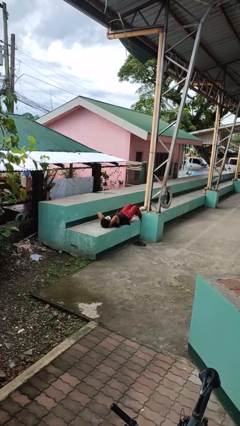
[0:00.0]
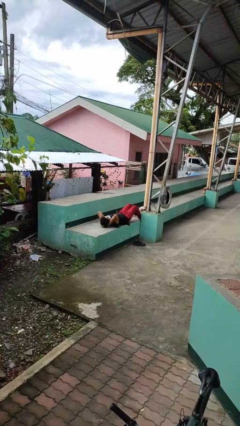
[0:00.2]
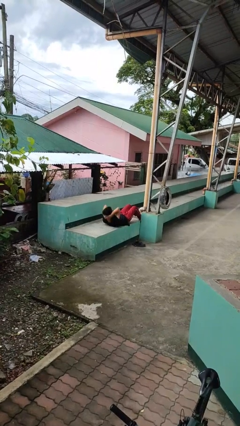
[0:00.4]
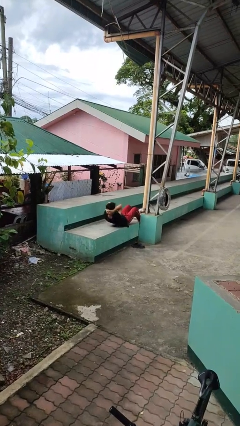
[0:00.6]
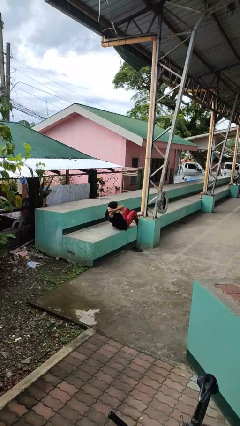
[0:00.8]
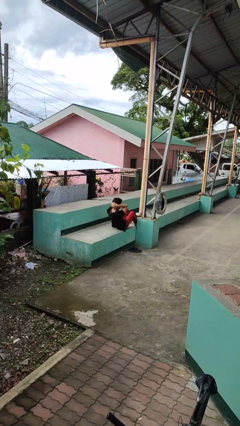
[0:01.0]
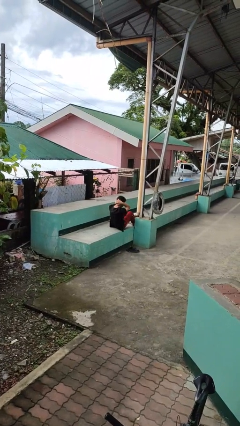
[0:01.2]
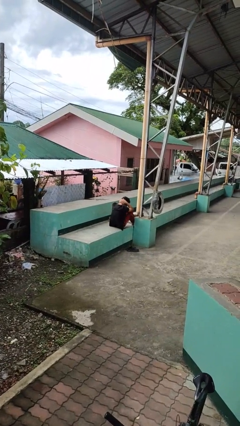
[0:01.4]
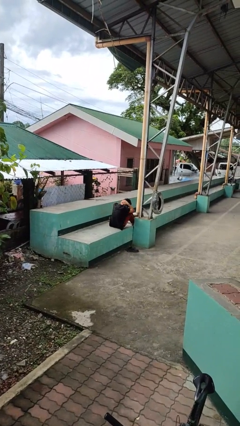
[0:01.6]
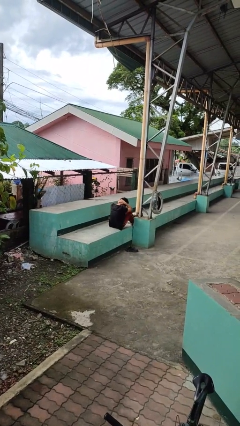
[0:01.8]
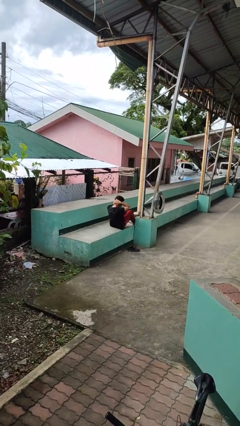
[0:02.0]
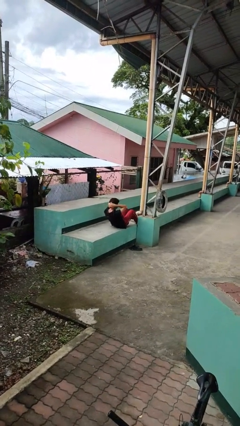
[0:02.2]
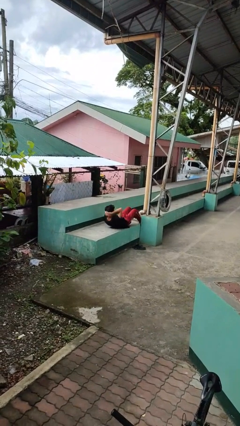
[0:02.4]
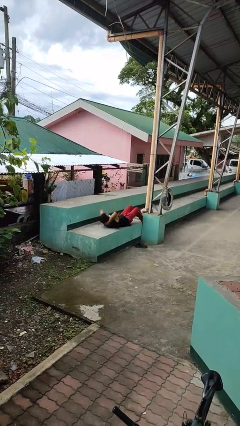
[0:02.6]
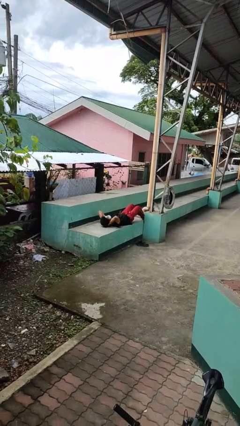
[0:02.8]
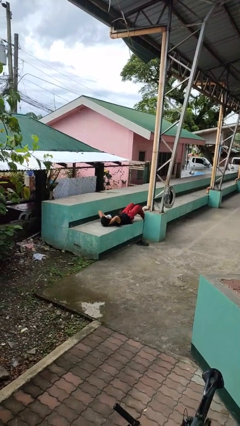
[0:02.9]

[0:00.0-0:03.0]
person exercises with situp

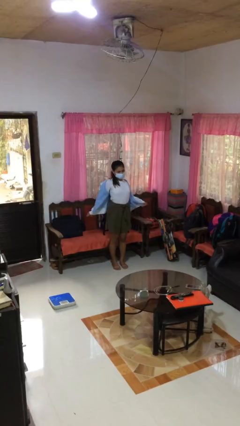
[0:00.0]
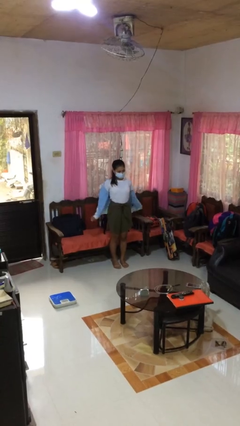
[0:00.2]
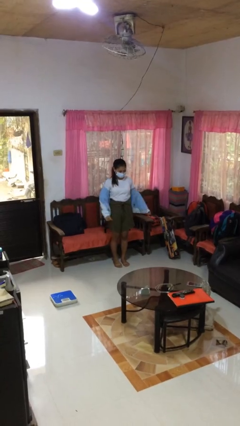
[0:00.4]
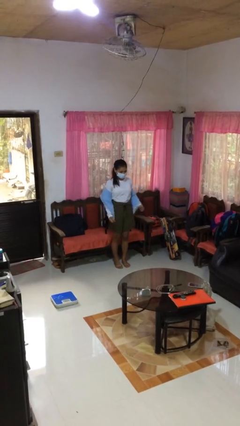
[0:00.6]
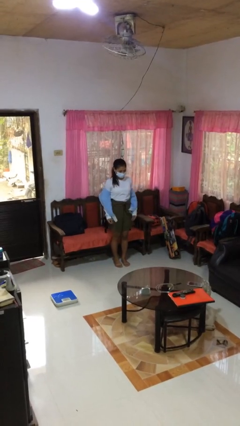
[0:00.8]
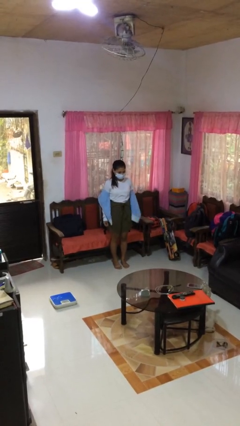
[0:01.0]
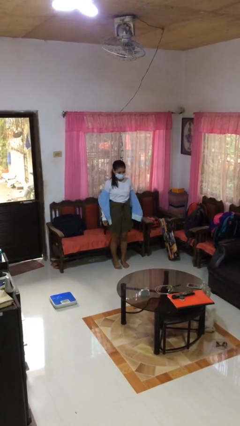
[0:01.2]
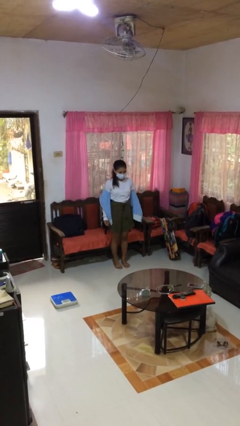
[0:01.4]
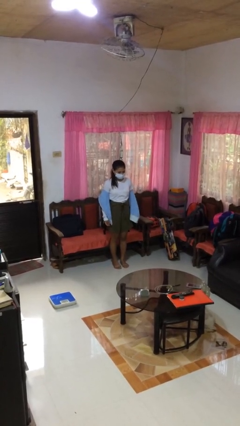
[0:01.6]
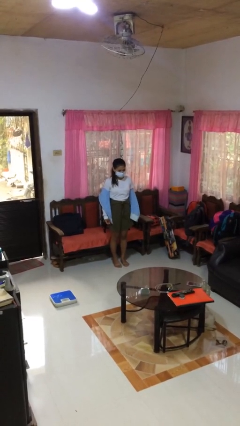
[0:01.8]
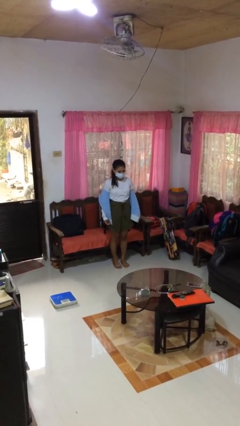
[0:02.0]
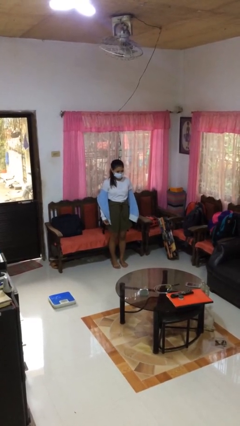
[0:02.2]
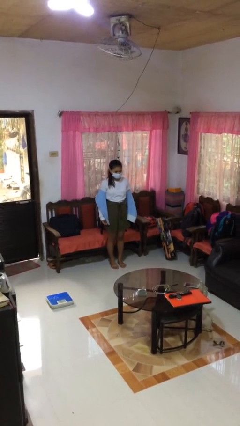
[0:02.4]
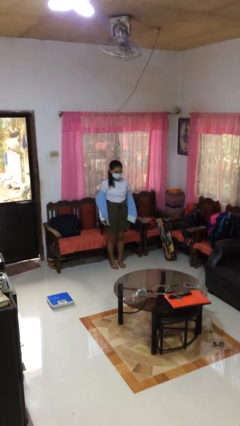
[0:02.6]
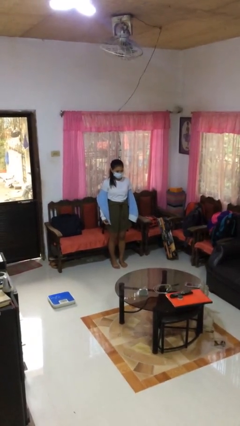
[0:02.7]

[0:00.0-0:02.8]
person takes off jacket

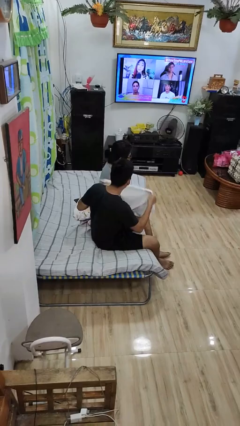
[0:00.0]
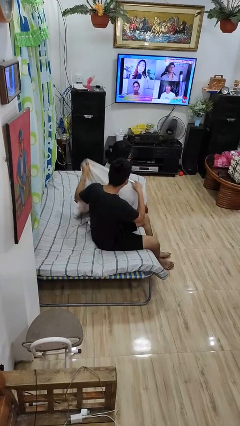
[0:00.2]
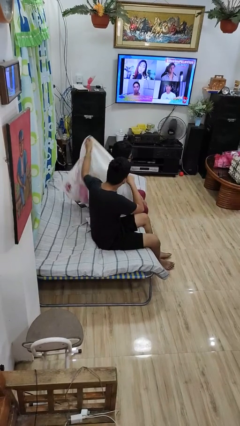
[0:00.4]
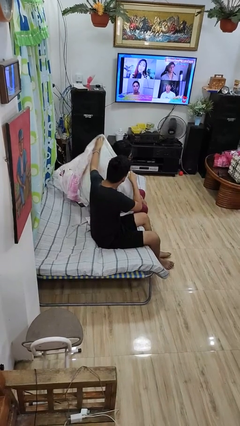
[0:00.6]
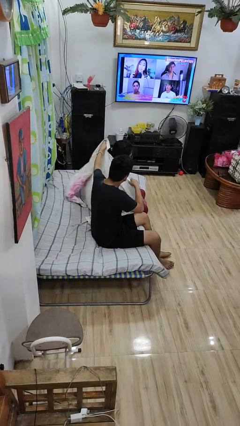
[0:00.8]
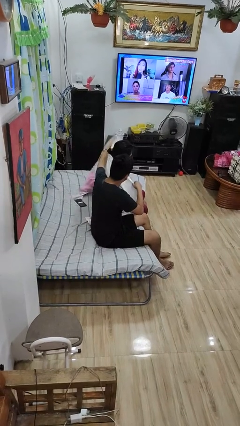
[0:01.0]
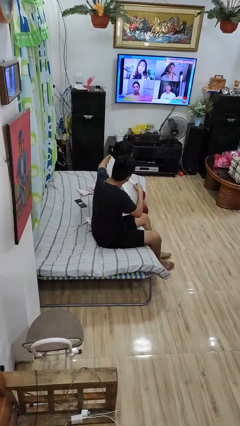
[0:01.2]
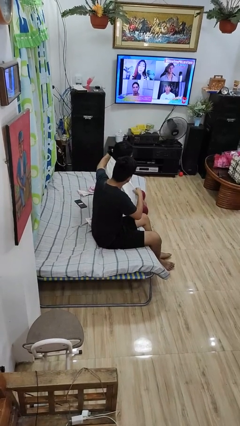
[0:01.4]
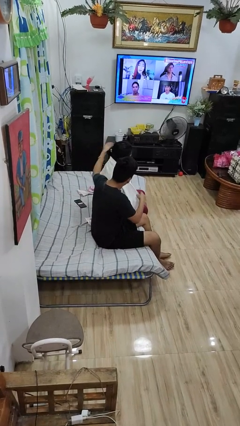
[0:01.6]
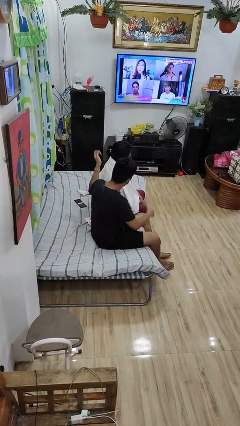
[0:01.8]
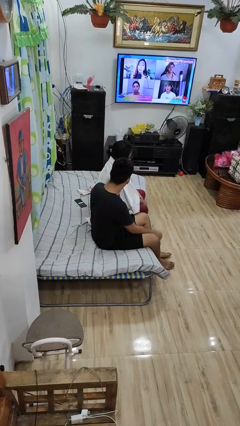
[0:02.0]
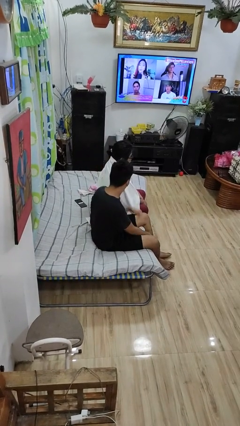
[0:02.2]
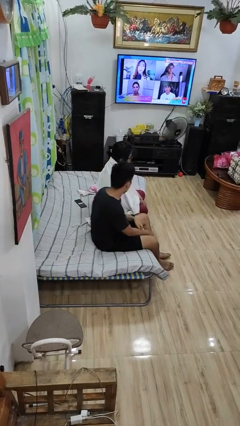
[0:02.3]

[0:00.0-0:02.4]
person covers friend with blanket

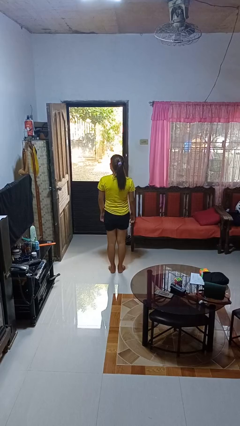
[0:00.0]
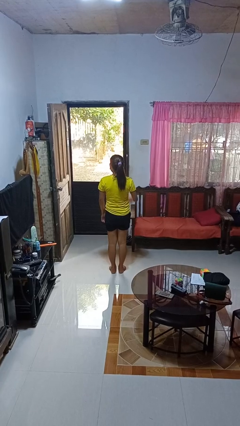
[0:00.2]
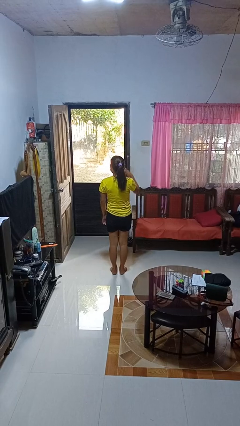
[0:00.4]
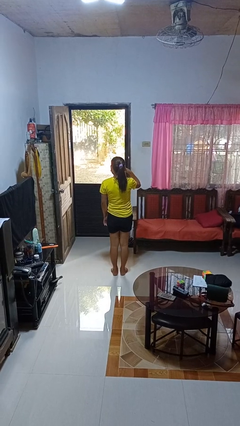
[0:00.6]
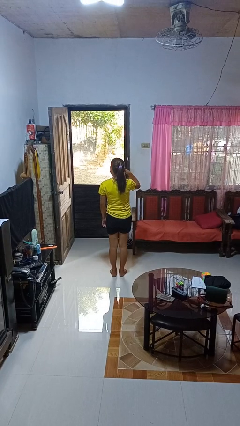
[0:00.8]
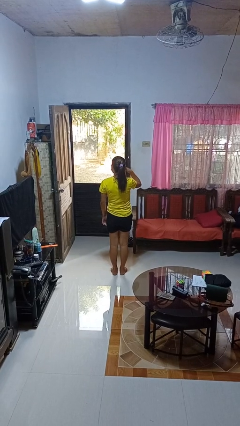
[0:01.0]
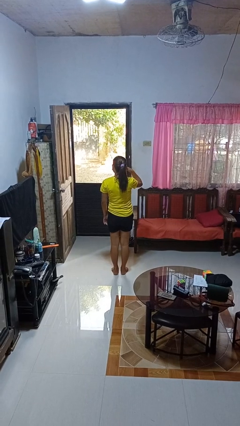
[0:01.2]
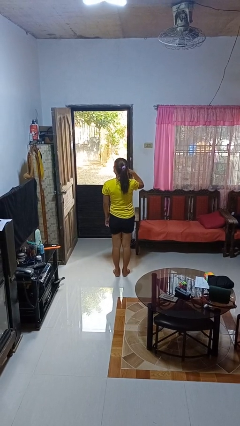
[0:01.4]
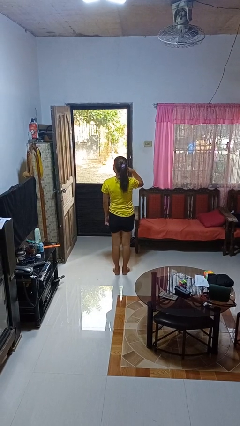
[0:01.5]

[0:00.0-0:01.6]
person gestures call me

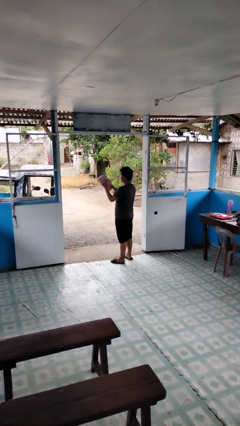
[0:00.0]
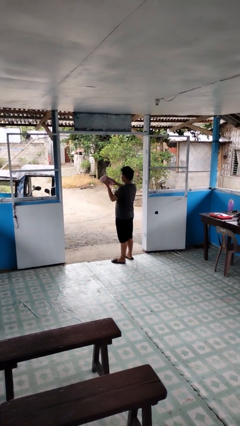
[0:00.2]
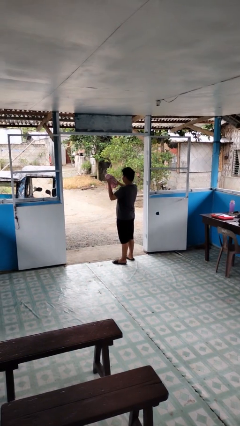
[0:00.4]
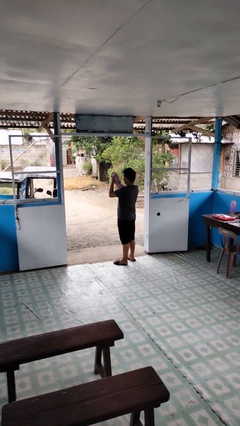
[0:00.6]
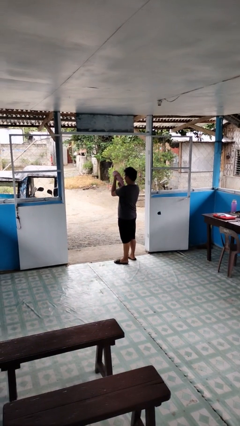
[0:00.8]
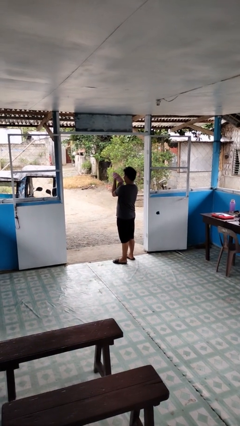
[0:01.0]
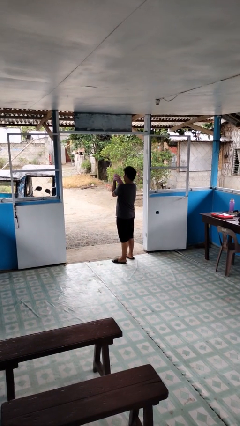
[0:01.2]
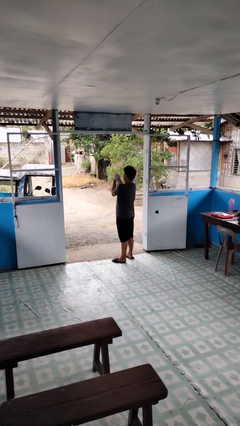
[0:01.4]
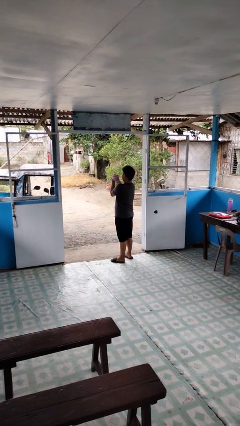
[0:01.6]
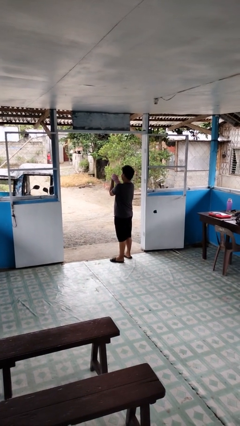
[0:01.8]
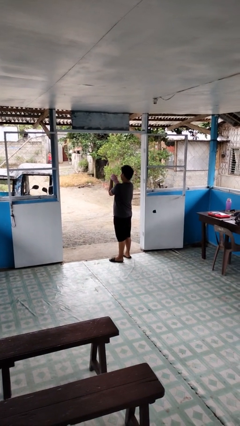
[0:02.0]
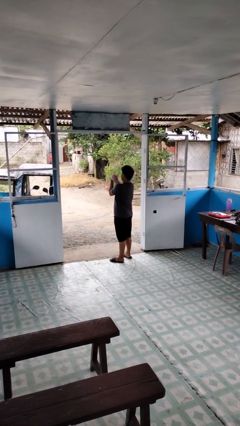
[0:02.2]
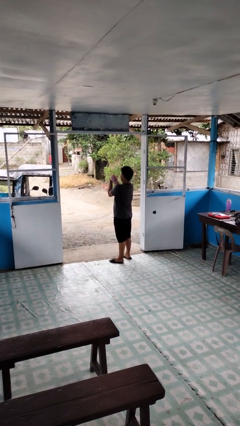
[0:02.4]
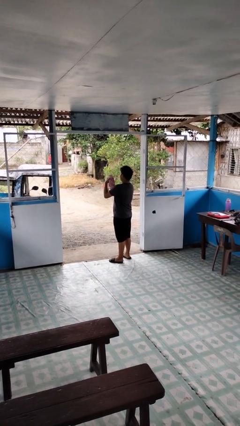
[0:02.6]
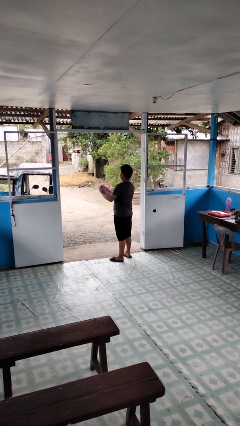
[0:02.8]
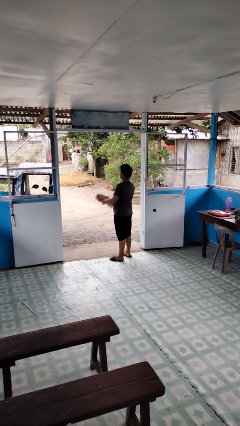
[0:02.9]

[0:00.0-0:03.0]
person squeezes object

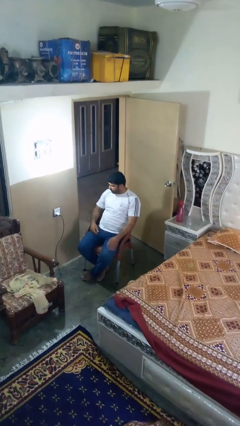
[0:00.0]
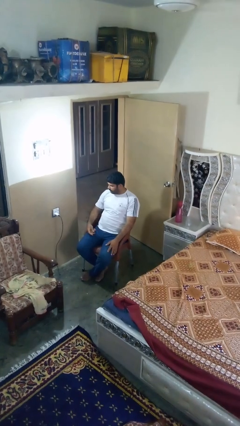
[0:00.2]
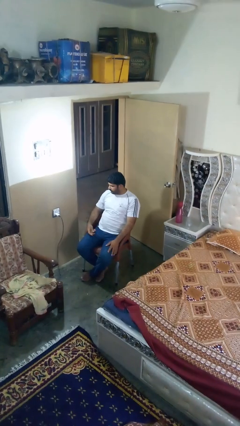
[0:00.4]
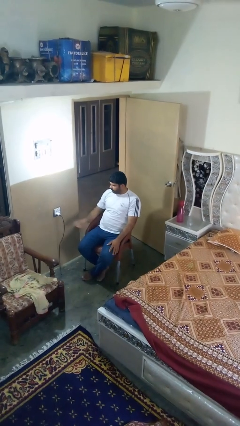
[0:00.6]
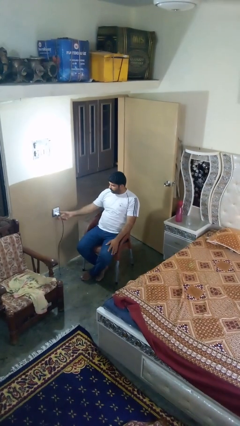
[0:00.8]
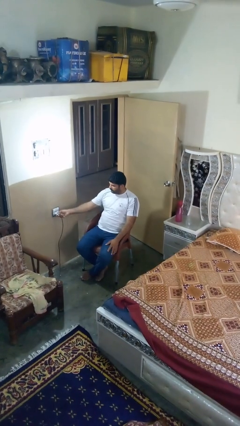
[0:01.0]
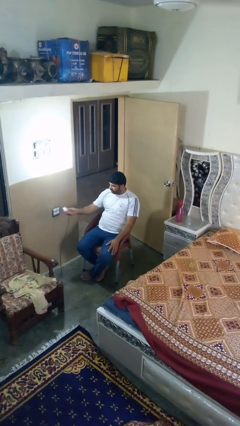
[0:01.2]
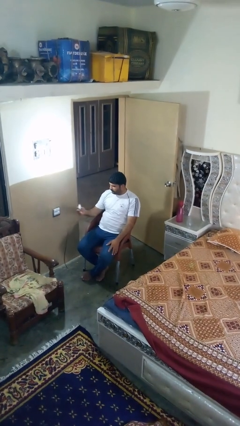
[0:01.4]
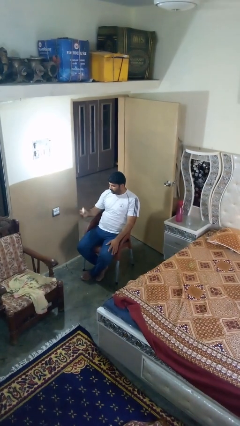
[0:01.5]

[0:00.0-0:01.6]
person unplugs from electrical socket

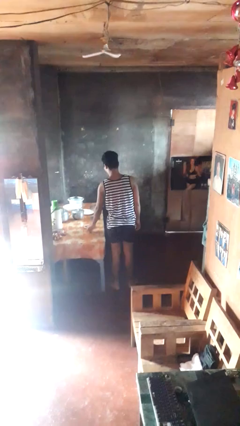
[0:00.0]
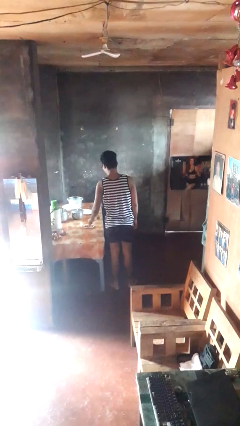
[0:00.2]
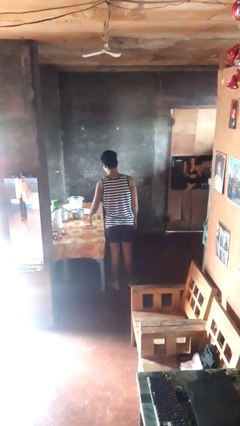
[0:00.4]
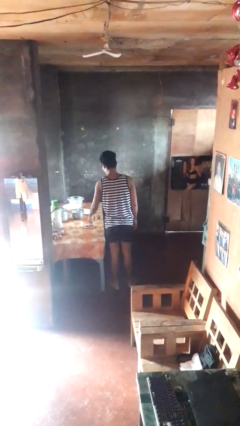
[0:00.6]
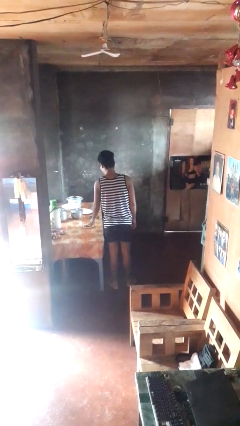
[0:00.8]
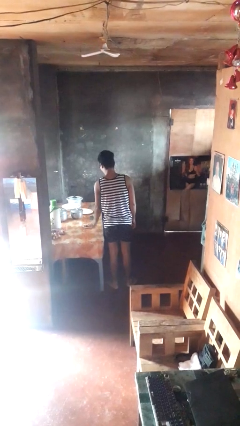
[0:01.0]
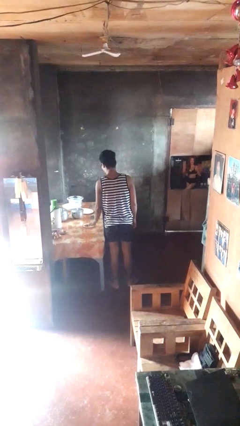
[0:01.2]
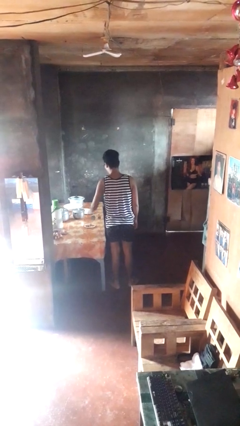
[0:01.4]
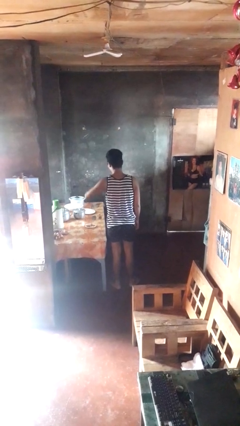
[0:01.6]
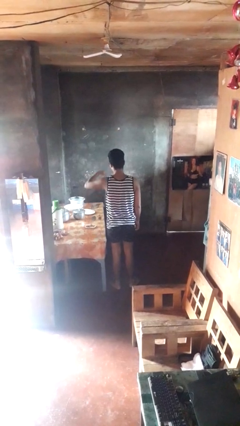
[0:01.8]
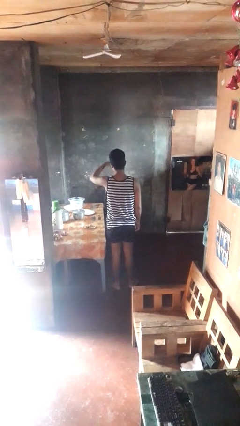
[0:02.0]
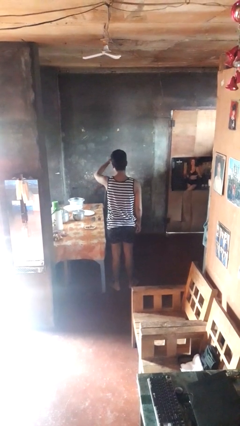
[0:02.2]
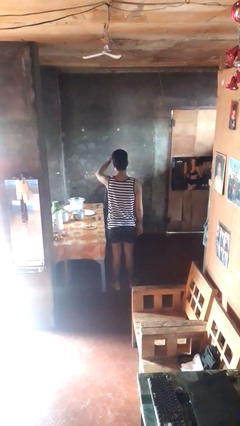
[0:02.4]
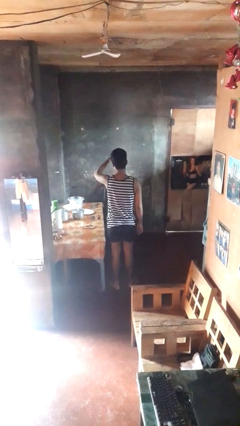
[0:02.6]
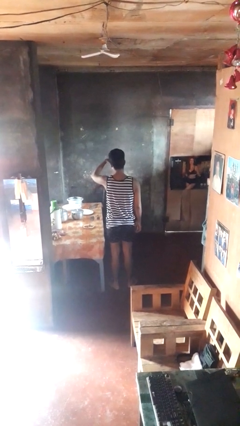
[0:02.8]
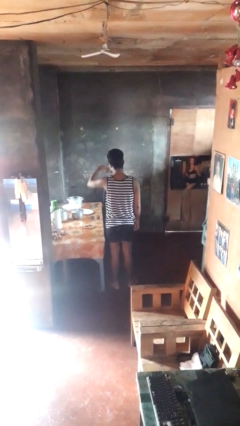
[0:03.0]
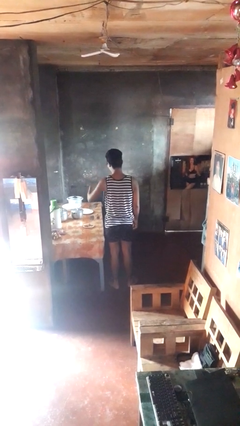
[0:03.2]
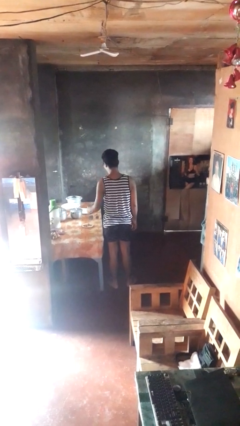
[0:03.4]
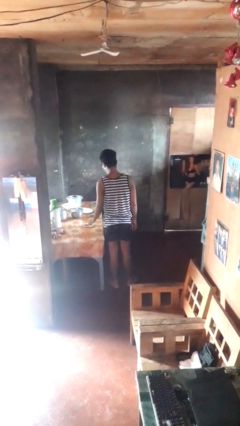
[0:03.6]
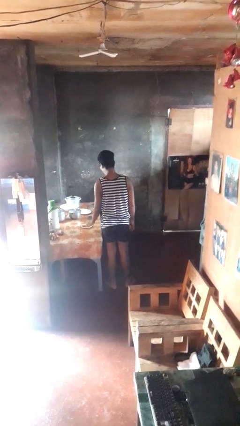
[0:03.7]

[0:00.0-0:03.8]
person eats with utensil
